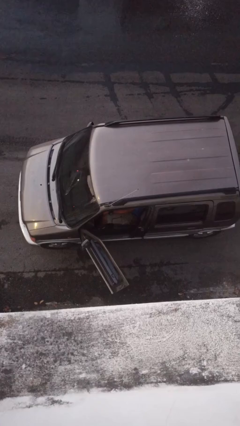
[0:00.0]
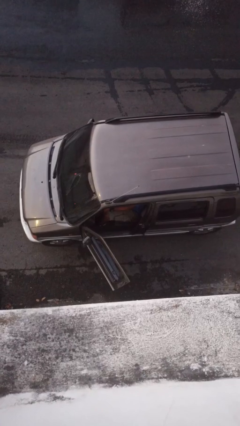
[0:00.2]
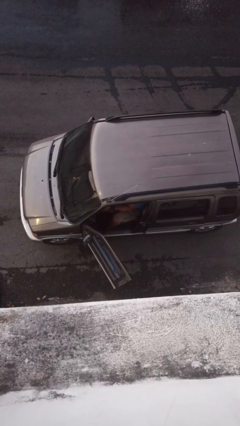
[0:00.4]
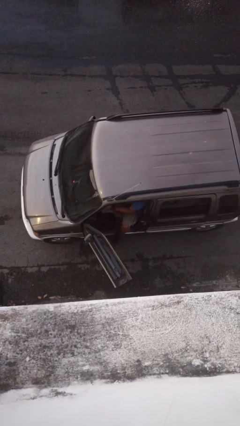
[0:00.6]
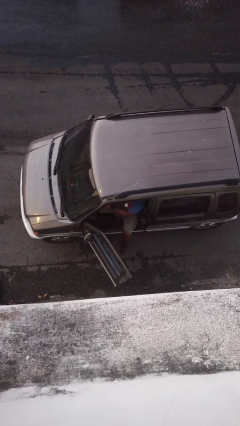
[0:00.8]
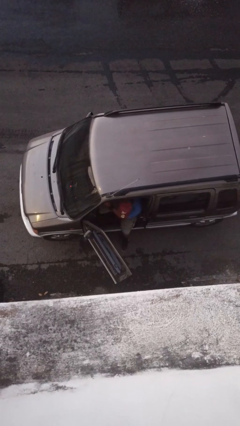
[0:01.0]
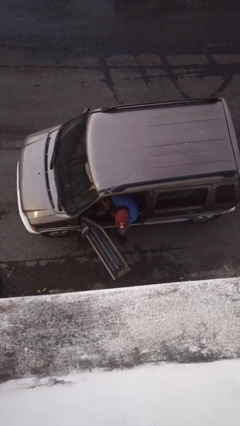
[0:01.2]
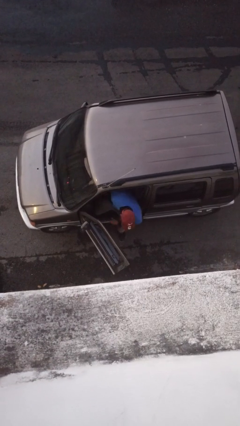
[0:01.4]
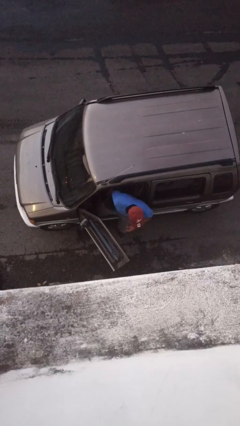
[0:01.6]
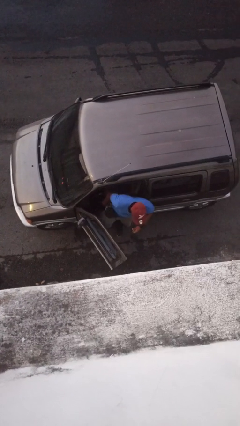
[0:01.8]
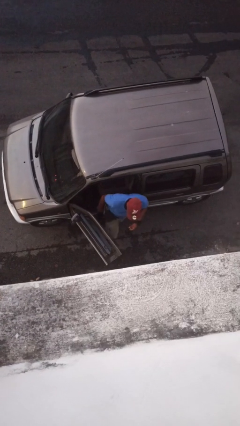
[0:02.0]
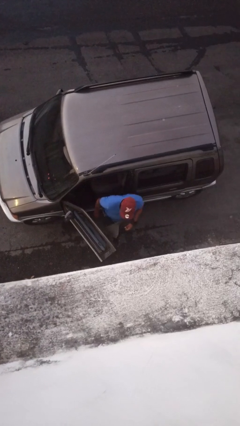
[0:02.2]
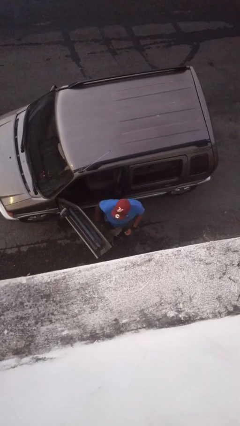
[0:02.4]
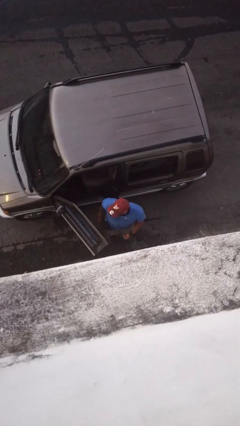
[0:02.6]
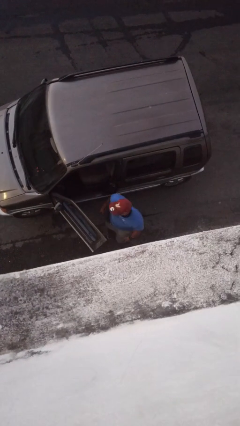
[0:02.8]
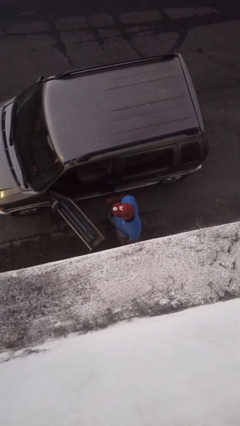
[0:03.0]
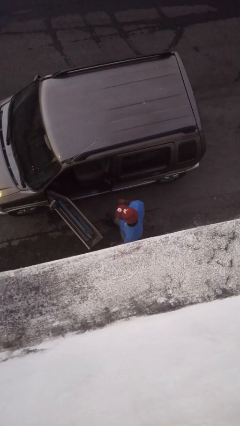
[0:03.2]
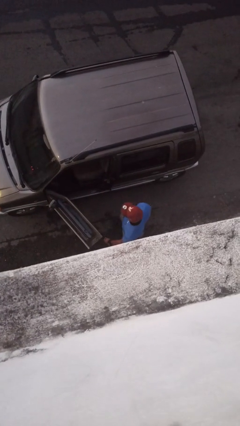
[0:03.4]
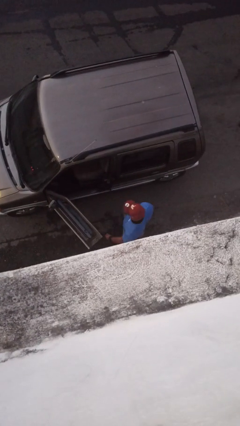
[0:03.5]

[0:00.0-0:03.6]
person exits car

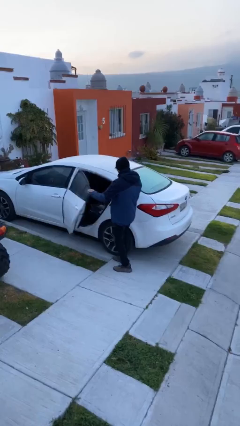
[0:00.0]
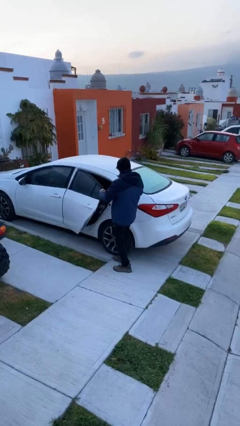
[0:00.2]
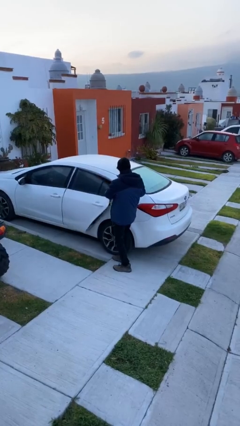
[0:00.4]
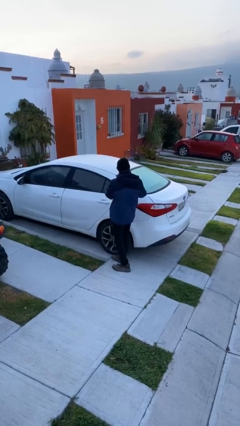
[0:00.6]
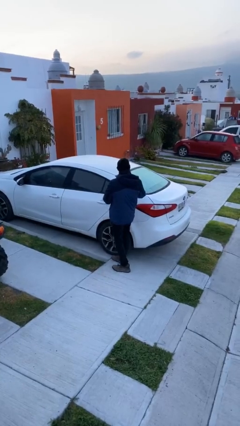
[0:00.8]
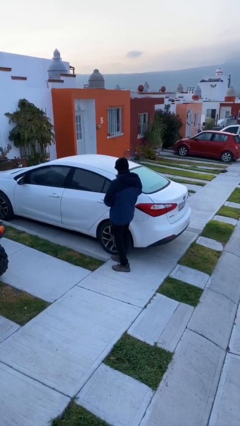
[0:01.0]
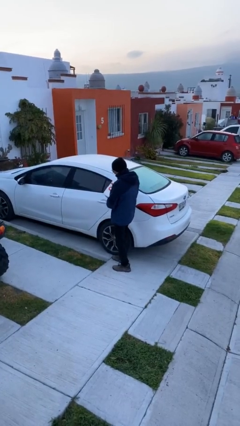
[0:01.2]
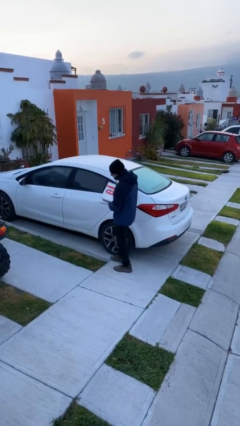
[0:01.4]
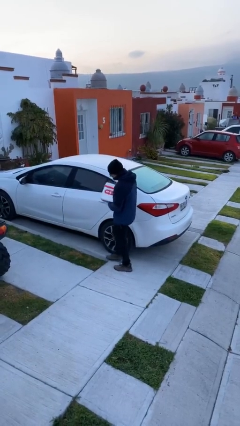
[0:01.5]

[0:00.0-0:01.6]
person closes car door

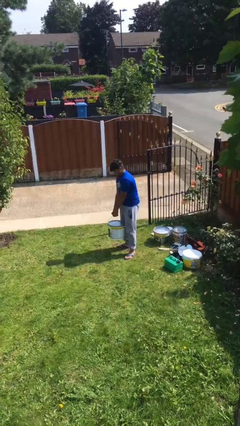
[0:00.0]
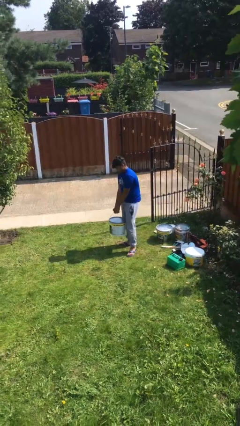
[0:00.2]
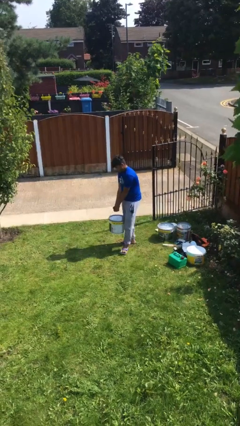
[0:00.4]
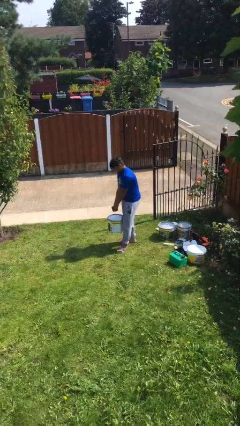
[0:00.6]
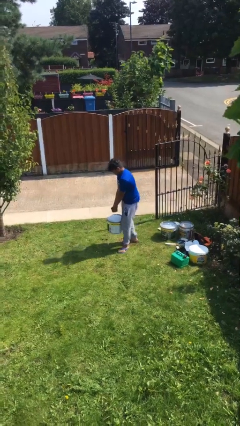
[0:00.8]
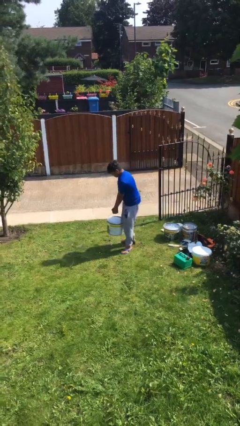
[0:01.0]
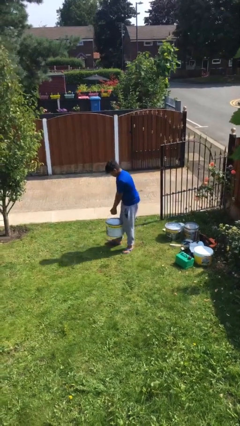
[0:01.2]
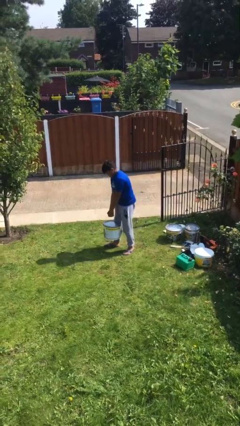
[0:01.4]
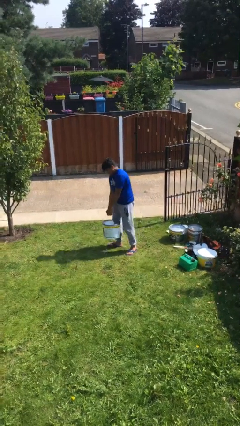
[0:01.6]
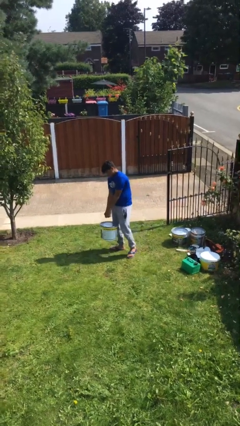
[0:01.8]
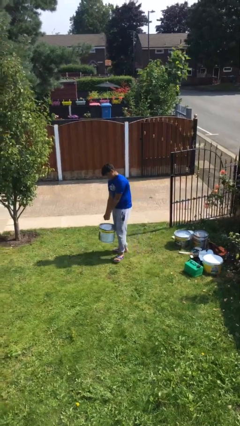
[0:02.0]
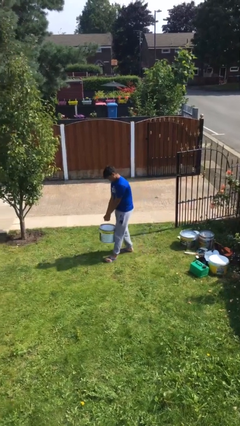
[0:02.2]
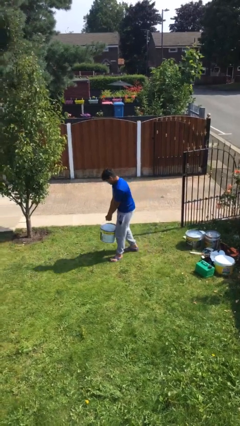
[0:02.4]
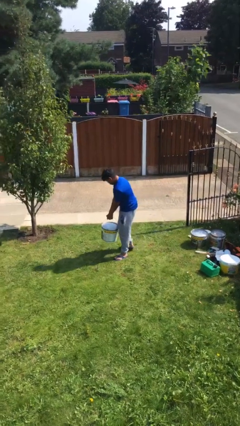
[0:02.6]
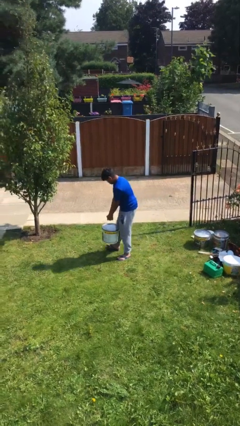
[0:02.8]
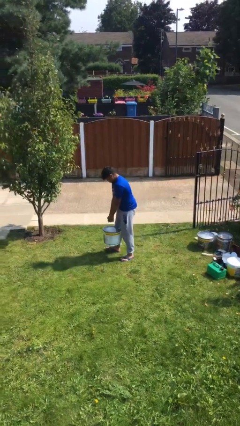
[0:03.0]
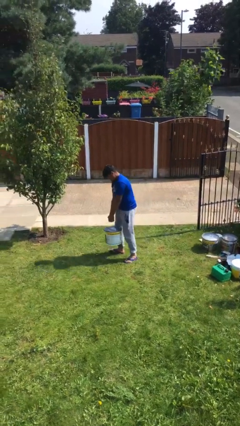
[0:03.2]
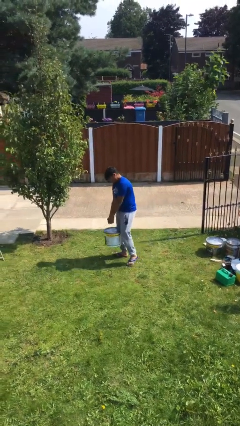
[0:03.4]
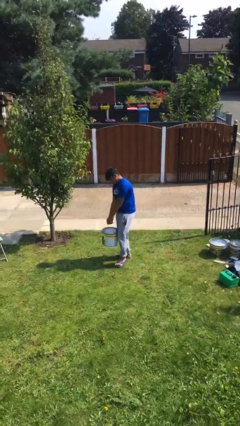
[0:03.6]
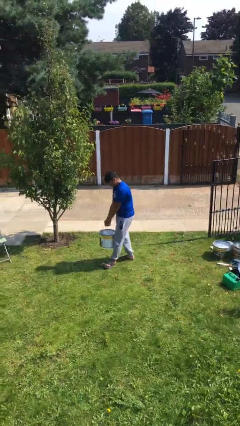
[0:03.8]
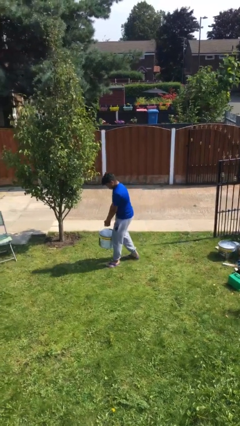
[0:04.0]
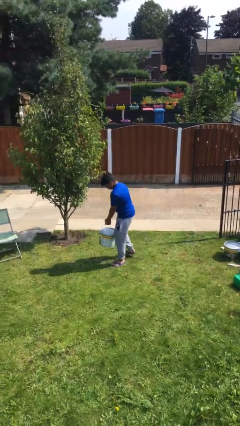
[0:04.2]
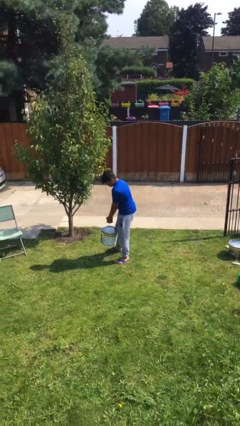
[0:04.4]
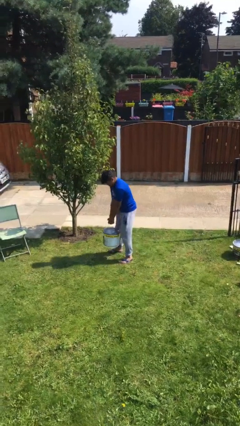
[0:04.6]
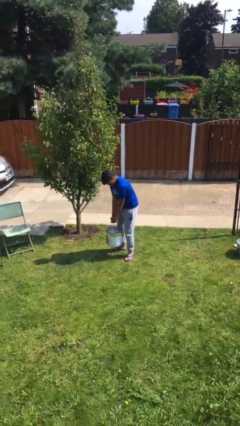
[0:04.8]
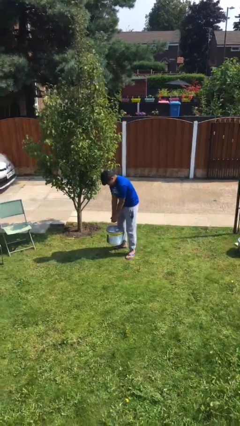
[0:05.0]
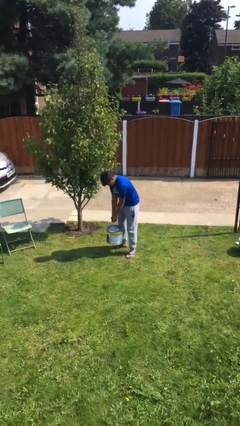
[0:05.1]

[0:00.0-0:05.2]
person carries heavy object

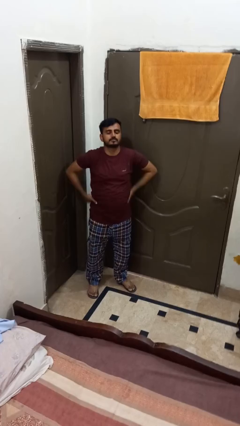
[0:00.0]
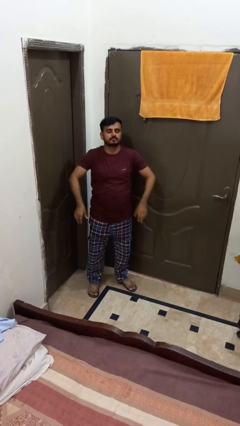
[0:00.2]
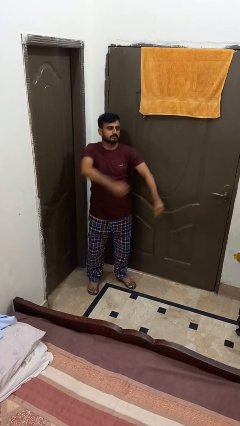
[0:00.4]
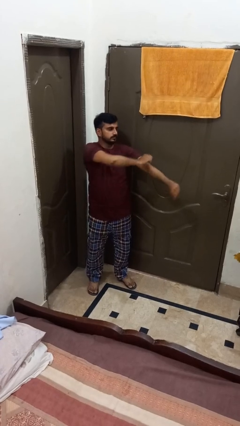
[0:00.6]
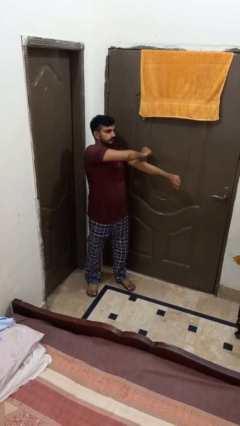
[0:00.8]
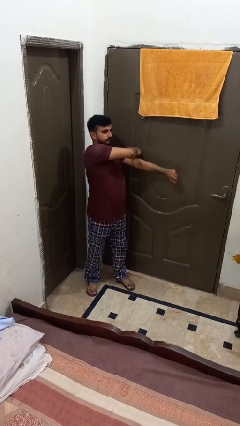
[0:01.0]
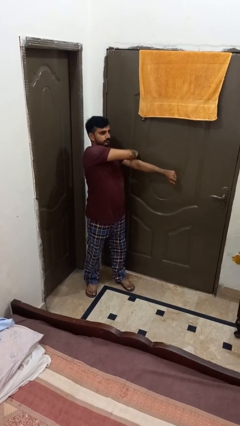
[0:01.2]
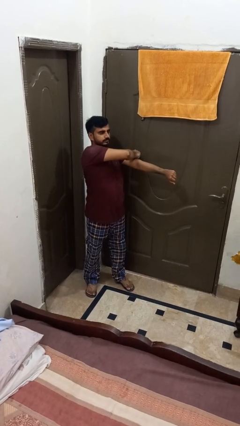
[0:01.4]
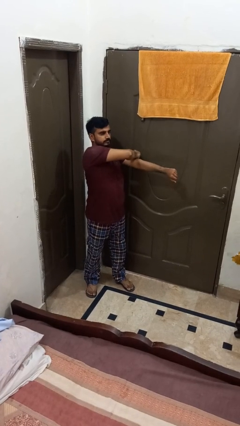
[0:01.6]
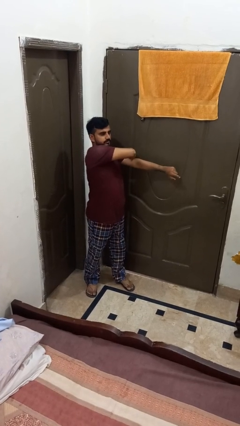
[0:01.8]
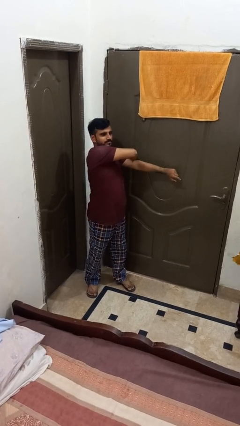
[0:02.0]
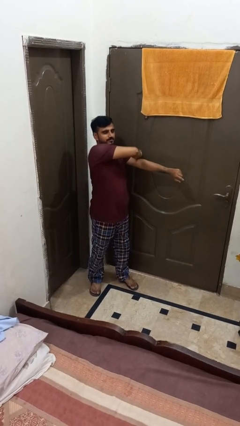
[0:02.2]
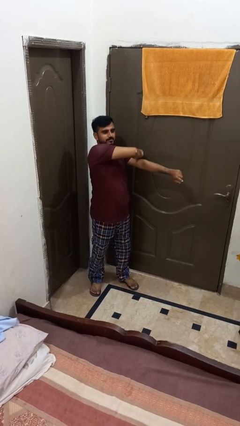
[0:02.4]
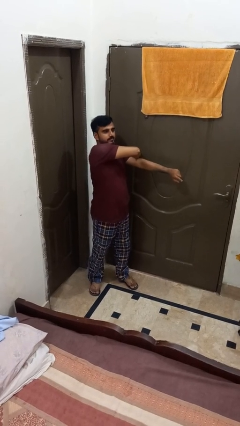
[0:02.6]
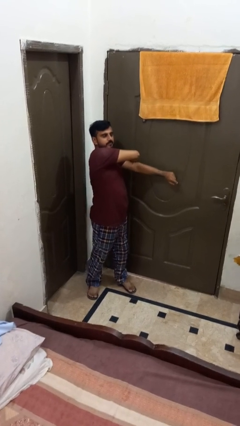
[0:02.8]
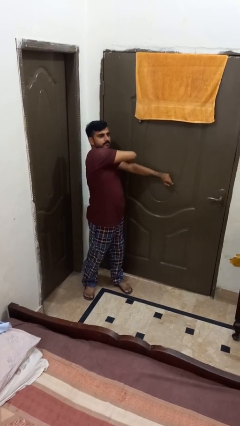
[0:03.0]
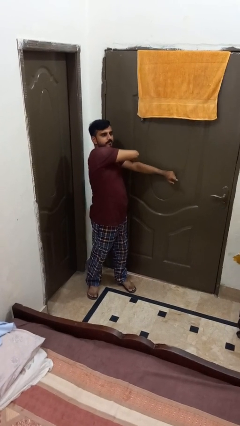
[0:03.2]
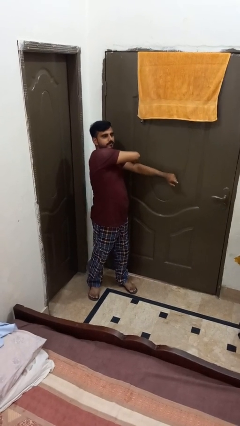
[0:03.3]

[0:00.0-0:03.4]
person stretches arms to side

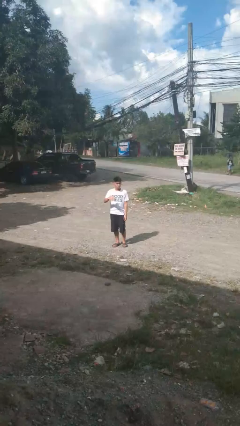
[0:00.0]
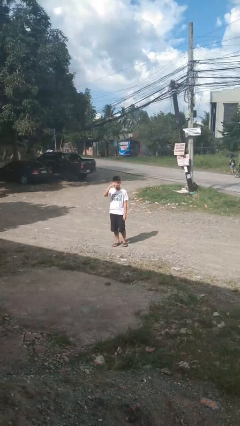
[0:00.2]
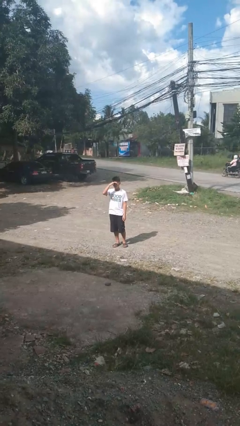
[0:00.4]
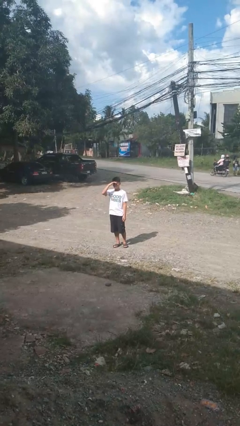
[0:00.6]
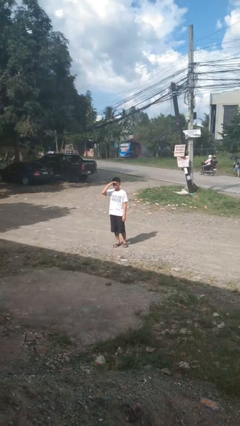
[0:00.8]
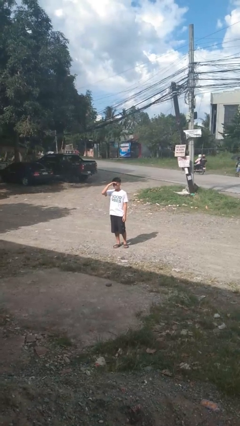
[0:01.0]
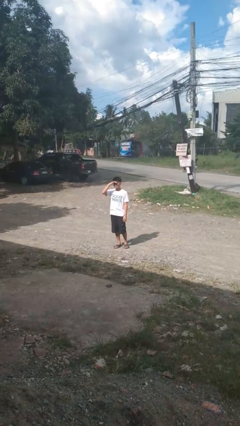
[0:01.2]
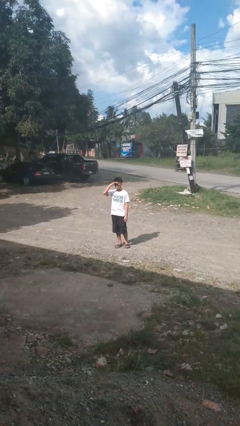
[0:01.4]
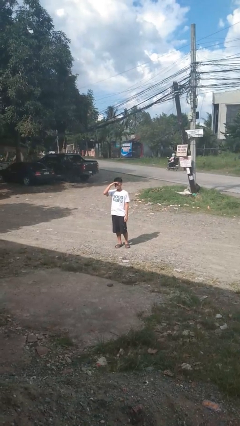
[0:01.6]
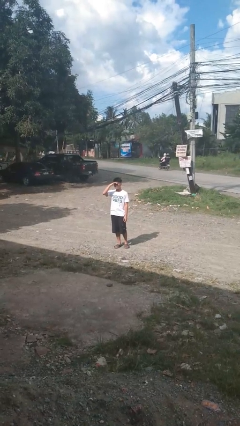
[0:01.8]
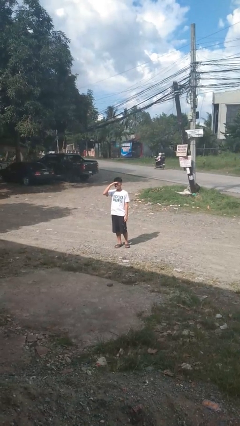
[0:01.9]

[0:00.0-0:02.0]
person shades eyes

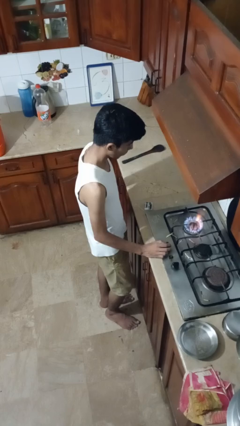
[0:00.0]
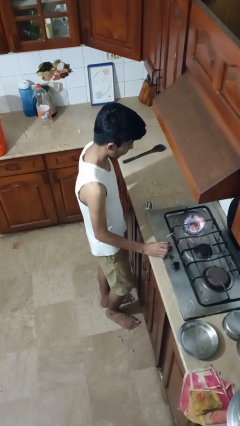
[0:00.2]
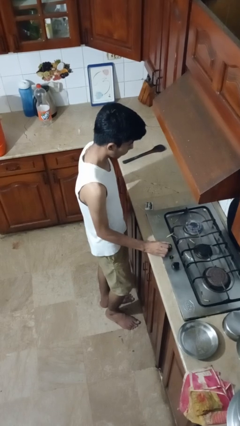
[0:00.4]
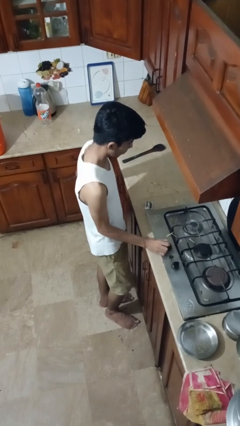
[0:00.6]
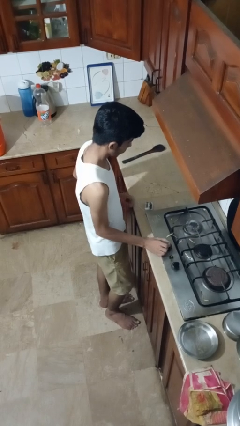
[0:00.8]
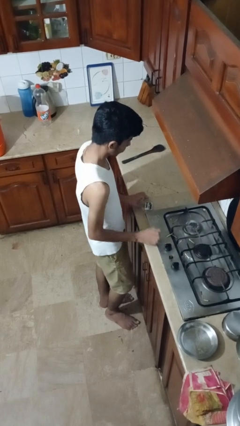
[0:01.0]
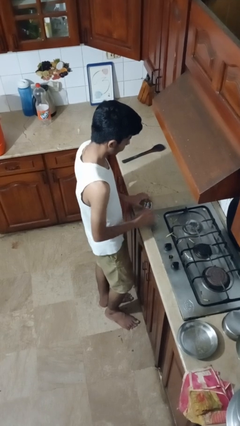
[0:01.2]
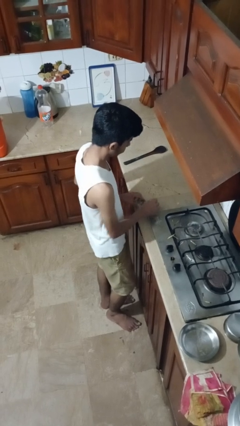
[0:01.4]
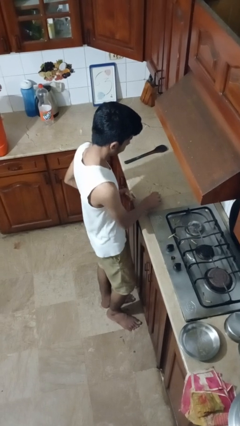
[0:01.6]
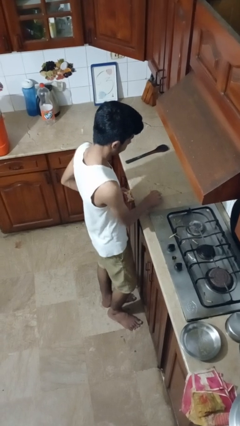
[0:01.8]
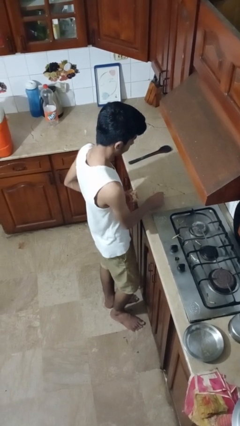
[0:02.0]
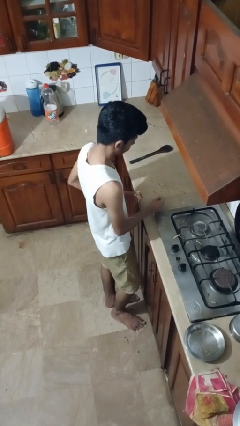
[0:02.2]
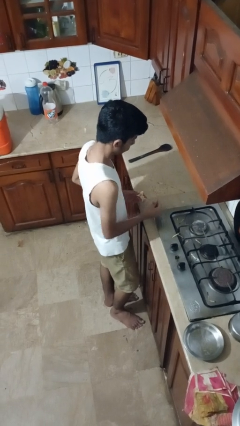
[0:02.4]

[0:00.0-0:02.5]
person turns off stovetop
